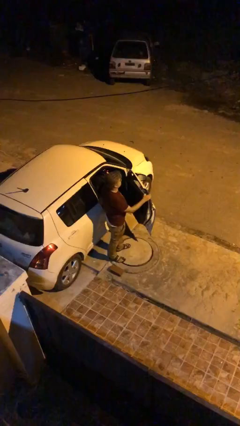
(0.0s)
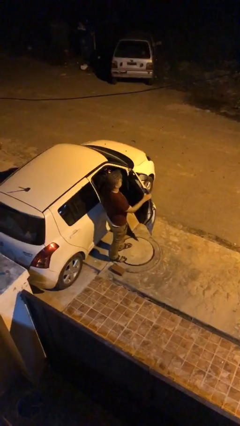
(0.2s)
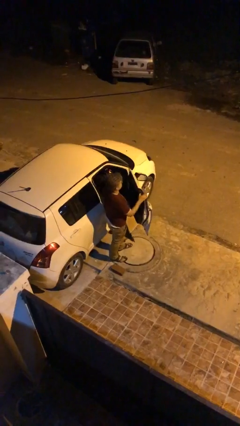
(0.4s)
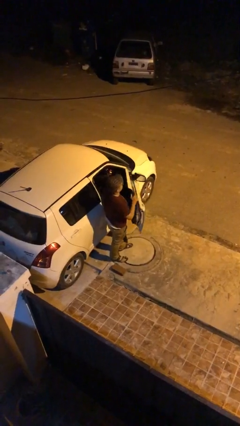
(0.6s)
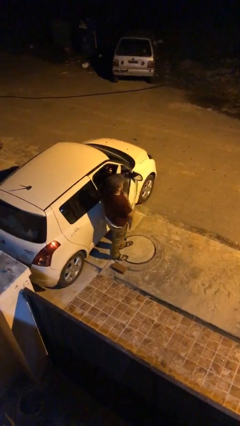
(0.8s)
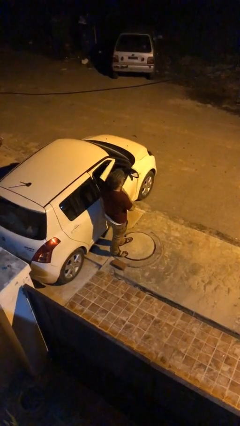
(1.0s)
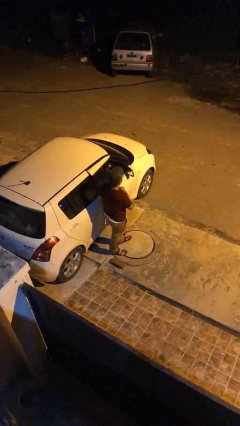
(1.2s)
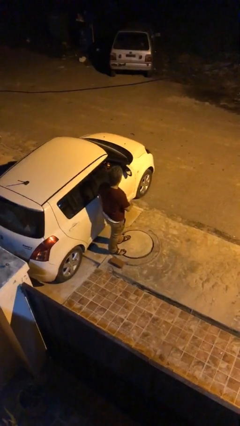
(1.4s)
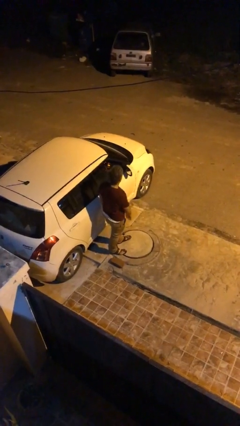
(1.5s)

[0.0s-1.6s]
person closes car door

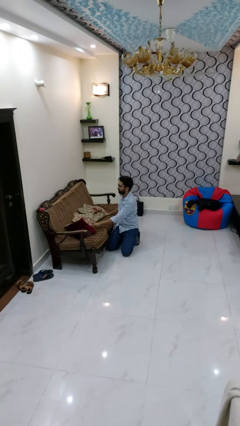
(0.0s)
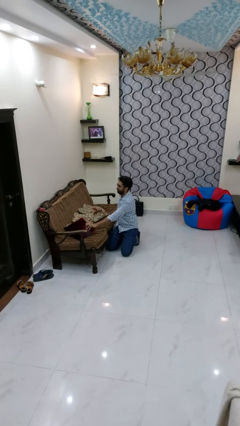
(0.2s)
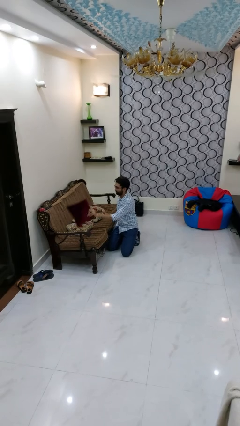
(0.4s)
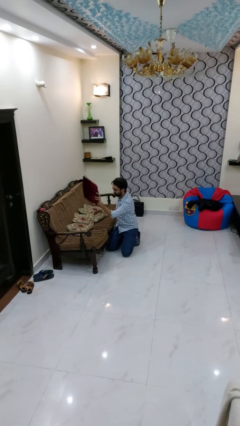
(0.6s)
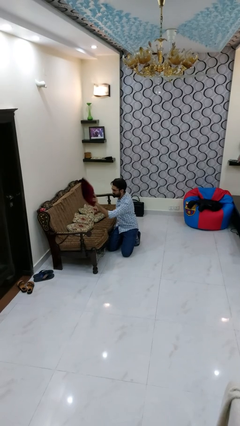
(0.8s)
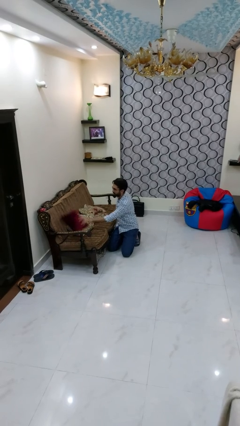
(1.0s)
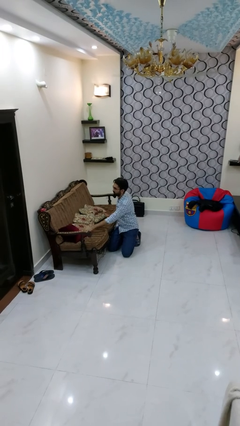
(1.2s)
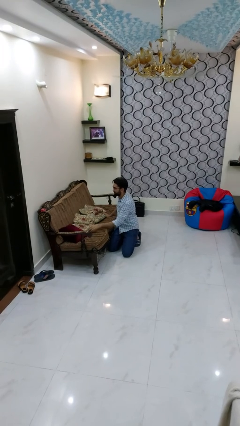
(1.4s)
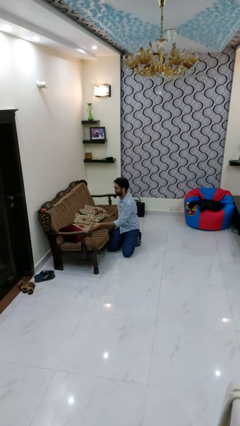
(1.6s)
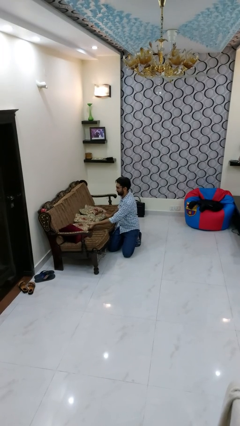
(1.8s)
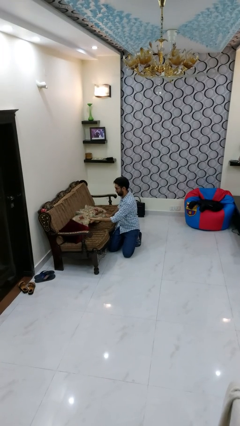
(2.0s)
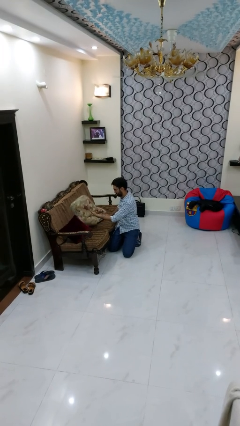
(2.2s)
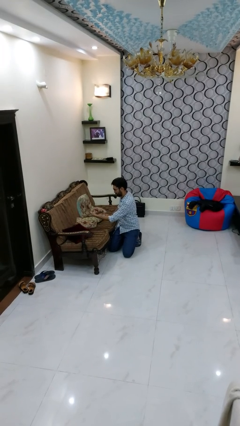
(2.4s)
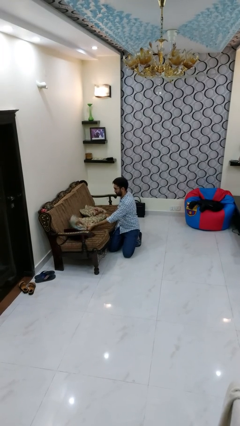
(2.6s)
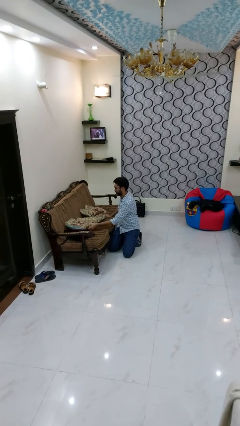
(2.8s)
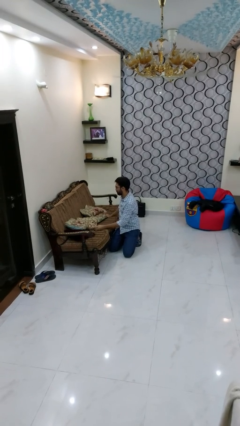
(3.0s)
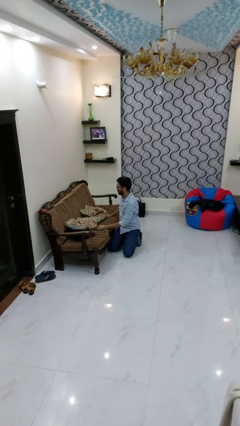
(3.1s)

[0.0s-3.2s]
person searches in couch

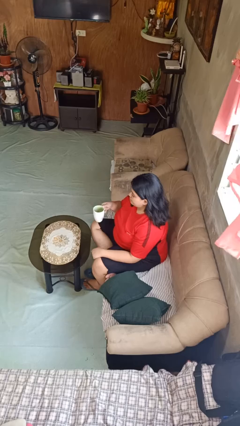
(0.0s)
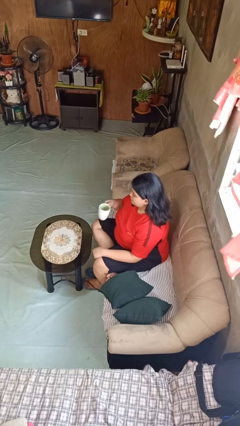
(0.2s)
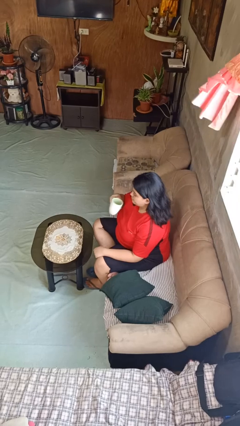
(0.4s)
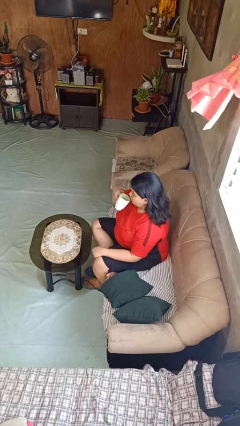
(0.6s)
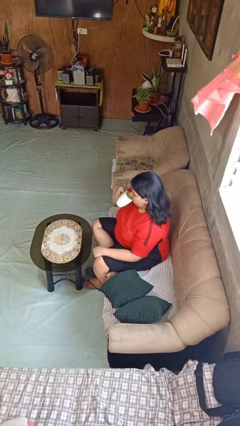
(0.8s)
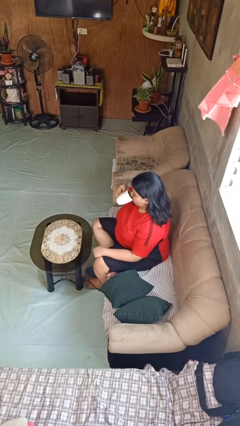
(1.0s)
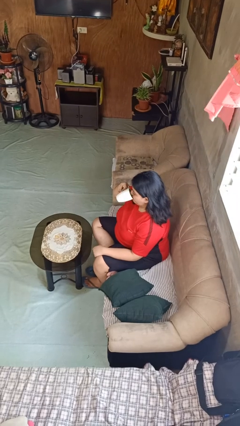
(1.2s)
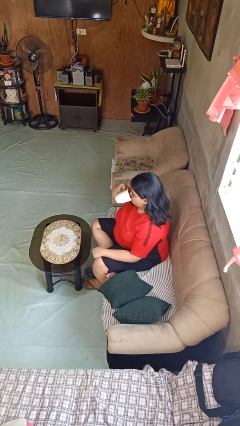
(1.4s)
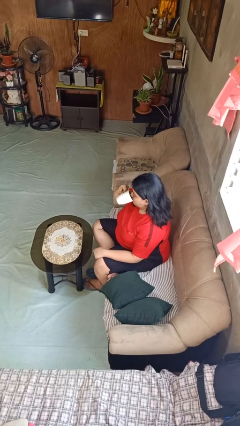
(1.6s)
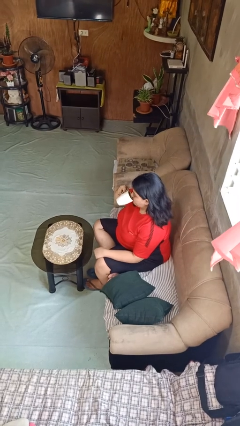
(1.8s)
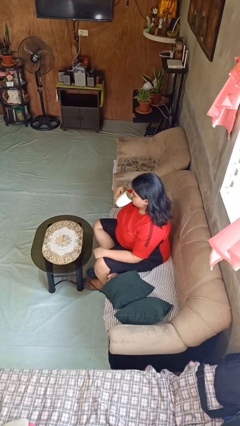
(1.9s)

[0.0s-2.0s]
person drinks from mug

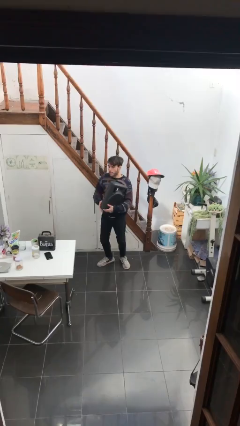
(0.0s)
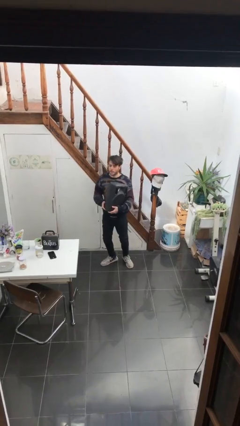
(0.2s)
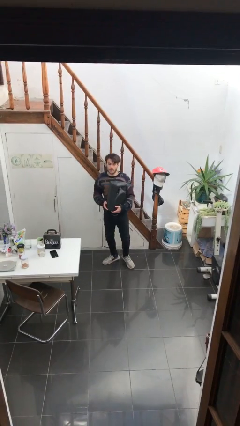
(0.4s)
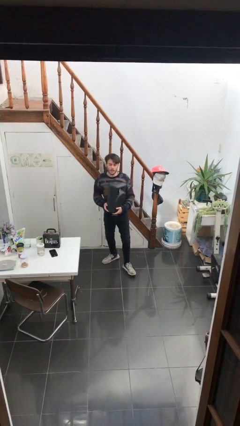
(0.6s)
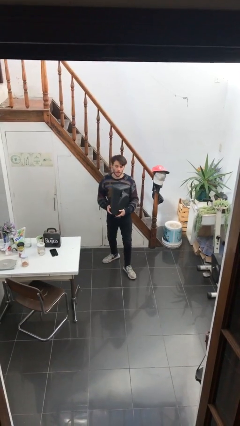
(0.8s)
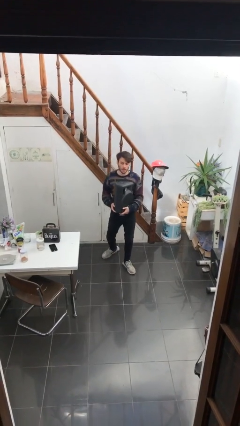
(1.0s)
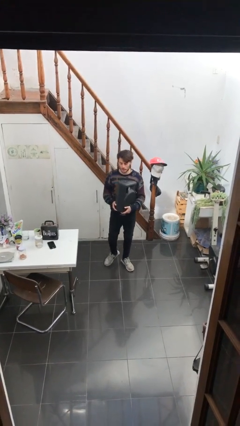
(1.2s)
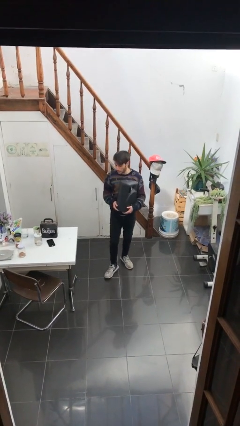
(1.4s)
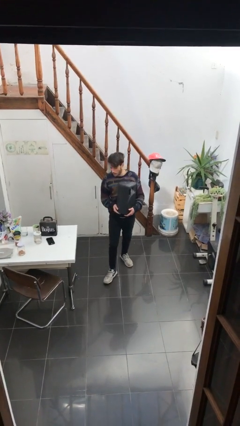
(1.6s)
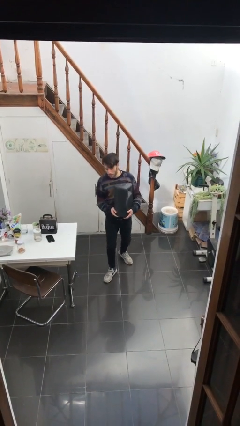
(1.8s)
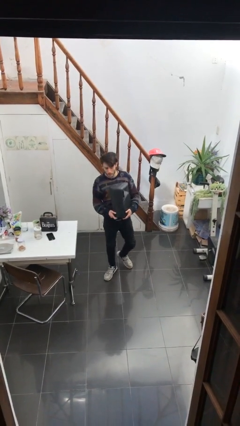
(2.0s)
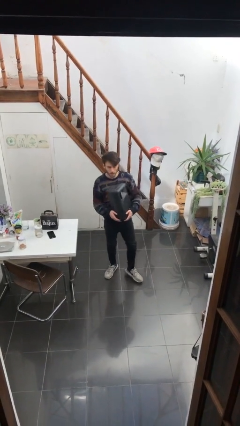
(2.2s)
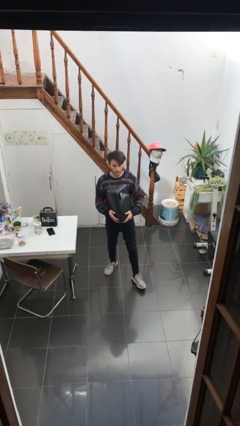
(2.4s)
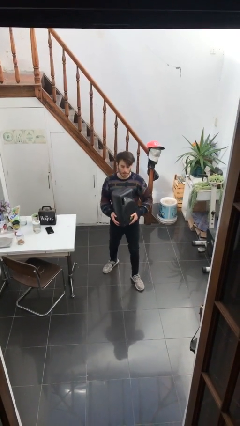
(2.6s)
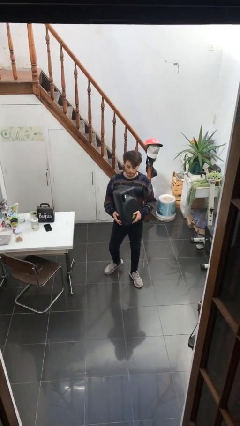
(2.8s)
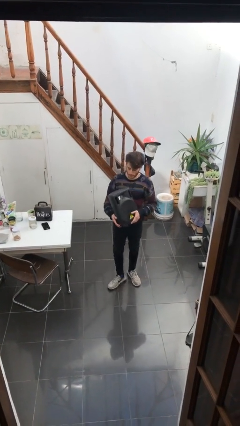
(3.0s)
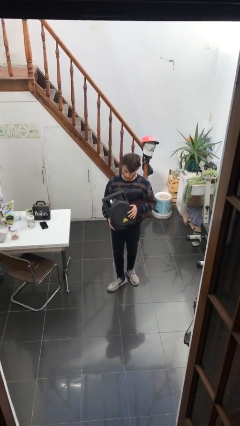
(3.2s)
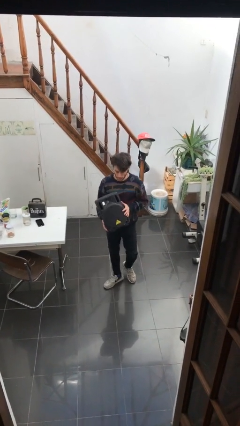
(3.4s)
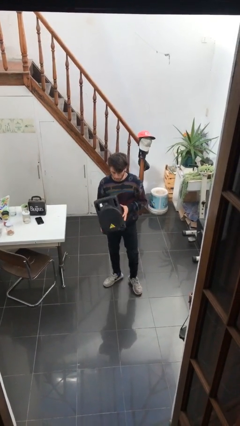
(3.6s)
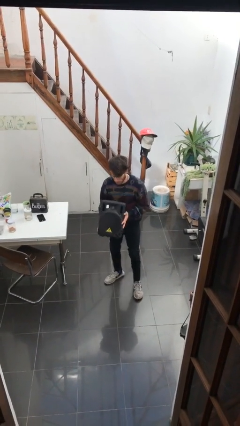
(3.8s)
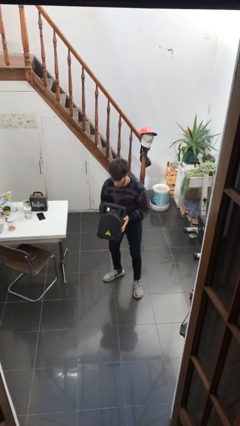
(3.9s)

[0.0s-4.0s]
person carries heavy object

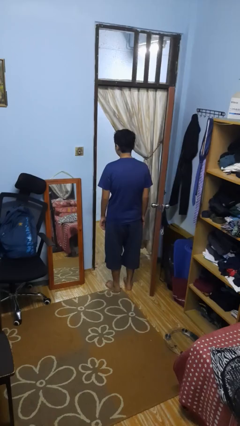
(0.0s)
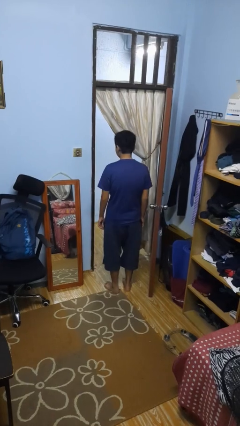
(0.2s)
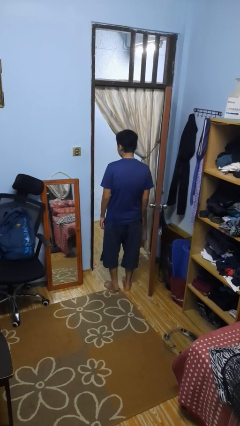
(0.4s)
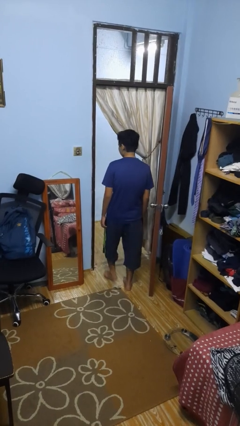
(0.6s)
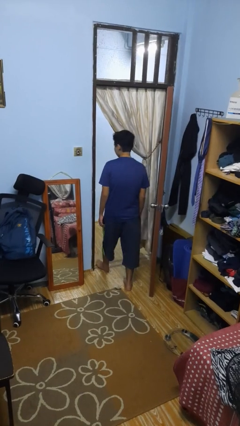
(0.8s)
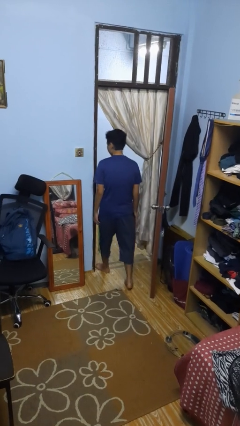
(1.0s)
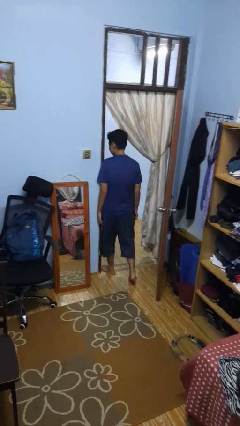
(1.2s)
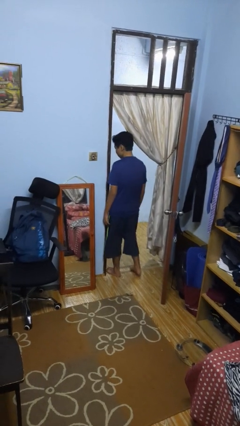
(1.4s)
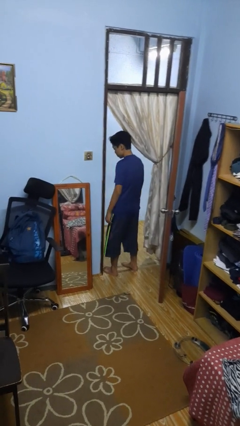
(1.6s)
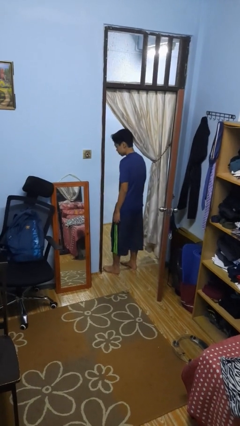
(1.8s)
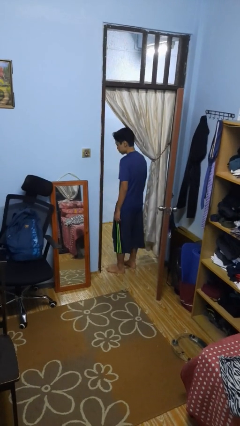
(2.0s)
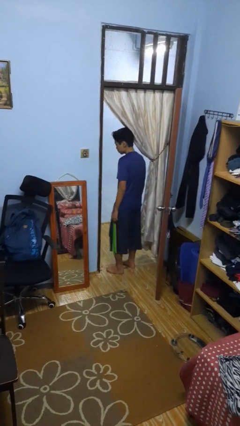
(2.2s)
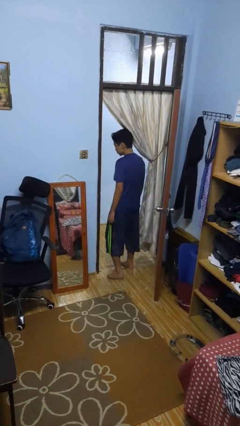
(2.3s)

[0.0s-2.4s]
person bumps into wall

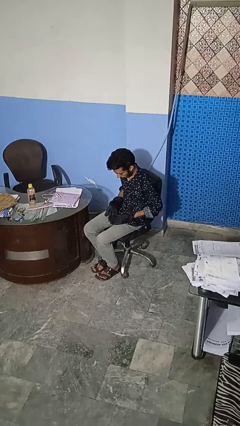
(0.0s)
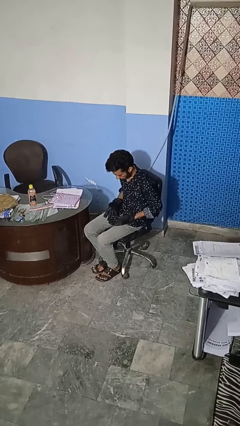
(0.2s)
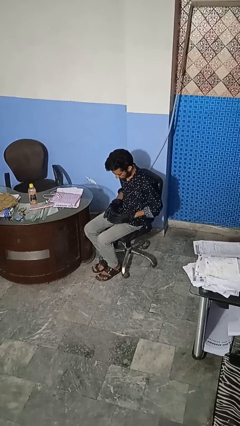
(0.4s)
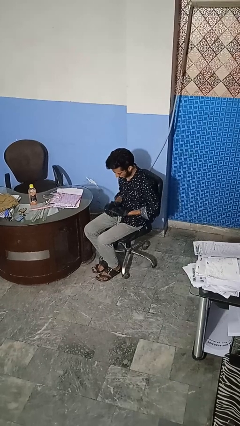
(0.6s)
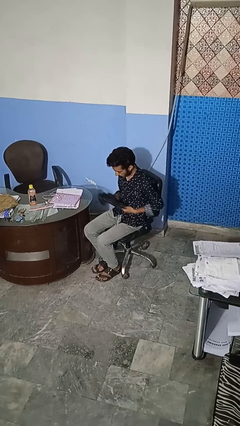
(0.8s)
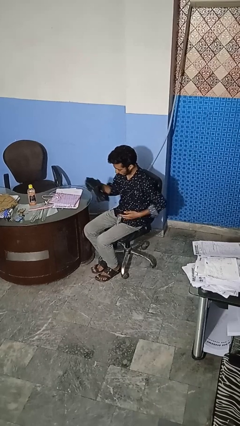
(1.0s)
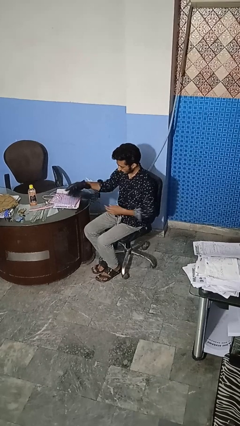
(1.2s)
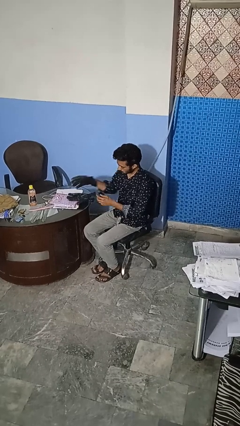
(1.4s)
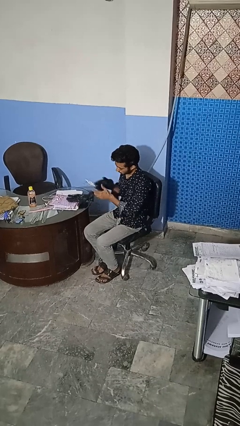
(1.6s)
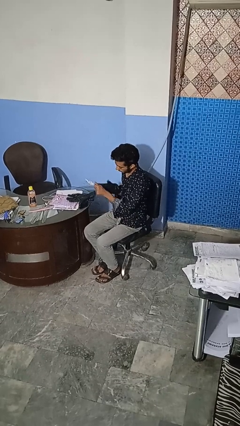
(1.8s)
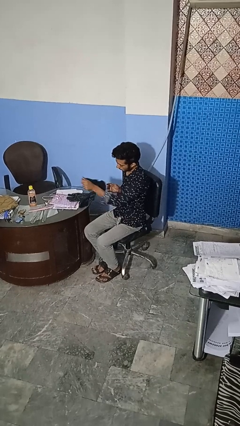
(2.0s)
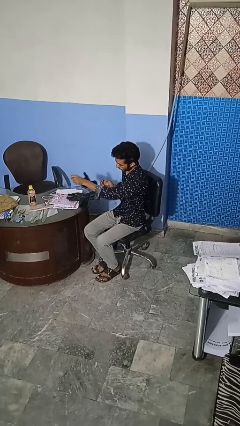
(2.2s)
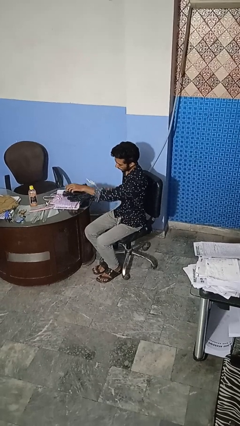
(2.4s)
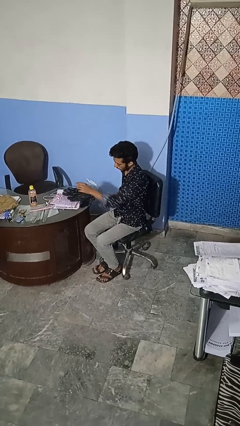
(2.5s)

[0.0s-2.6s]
person takes off gloves

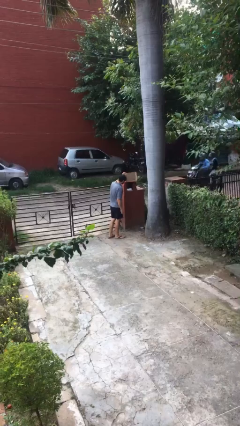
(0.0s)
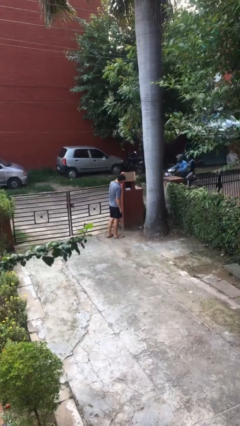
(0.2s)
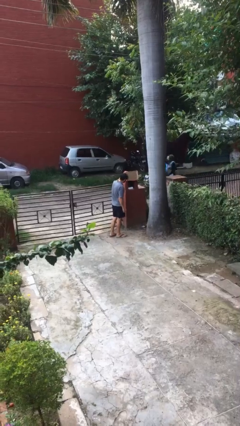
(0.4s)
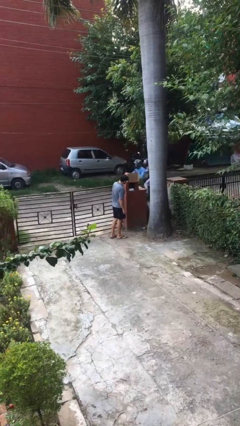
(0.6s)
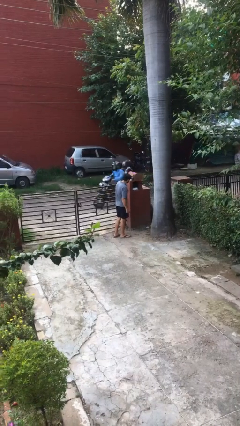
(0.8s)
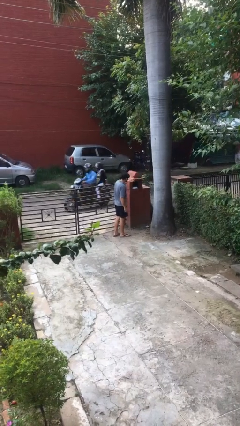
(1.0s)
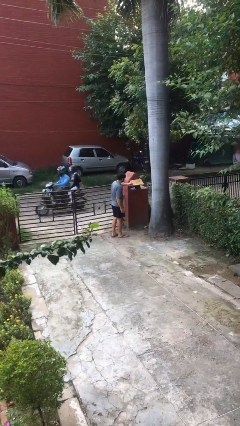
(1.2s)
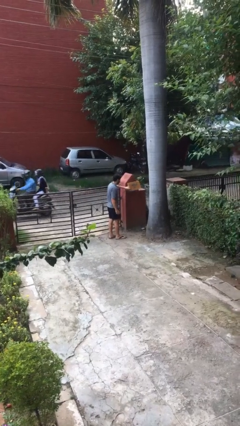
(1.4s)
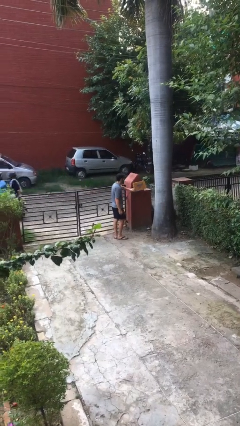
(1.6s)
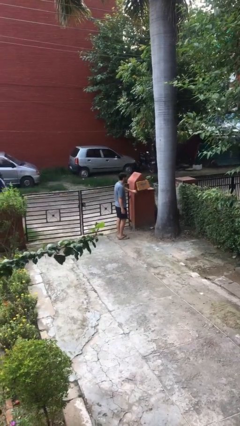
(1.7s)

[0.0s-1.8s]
person closes mailbox
